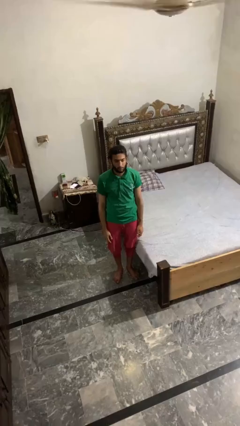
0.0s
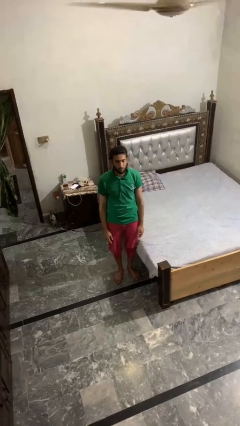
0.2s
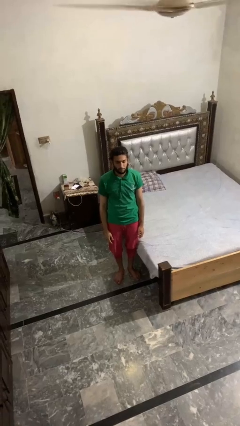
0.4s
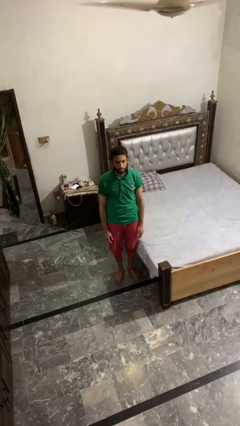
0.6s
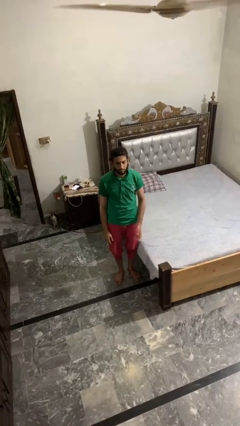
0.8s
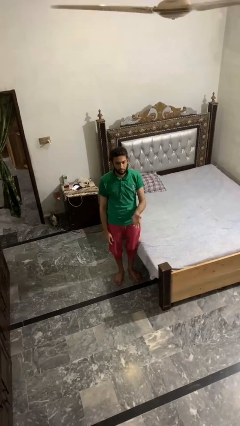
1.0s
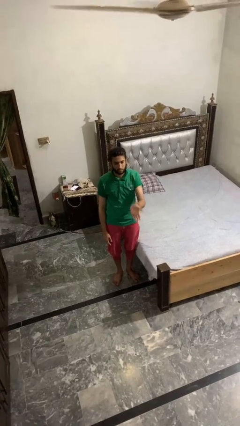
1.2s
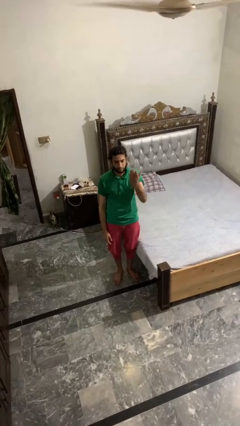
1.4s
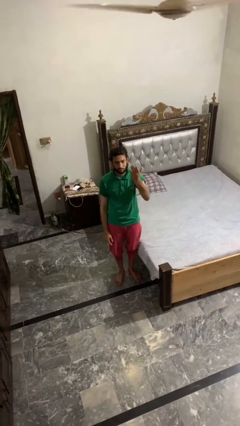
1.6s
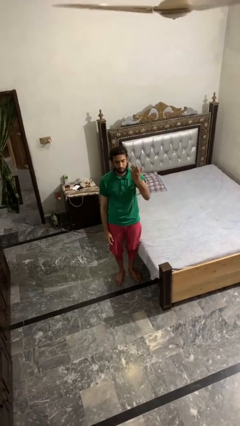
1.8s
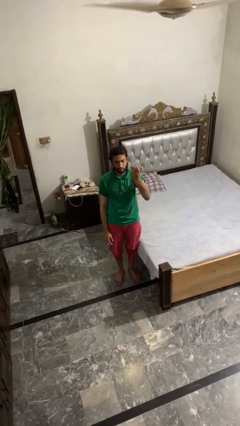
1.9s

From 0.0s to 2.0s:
person gestures swipe up

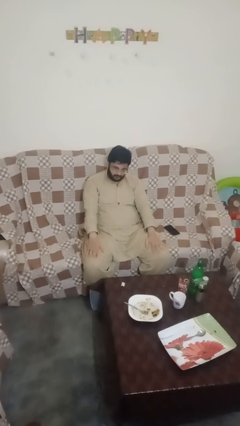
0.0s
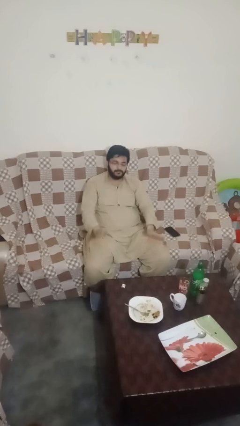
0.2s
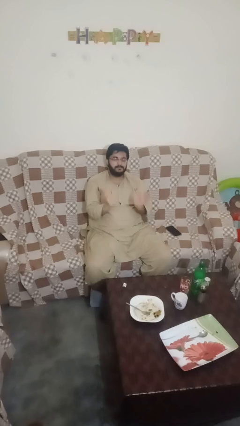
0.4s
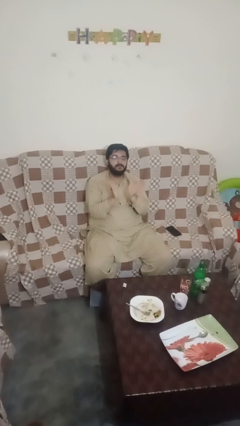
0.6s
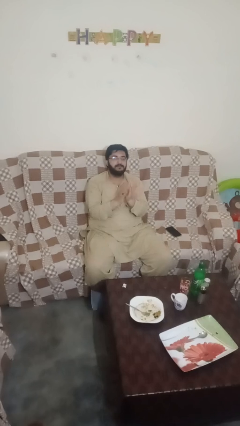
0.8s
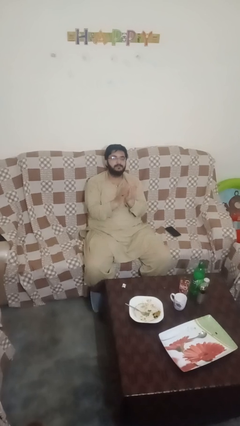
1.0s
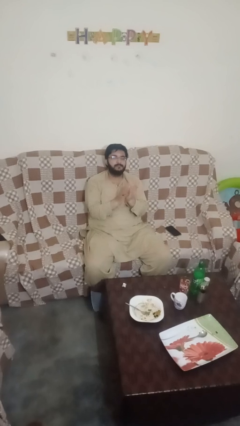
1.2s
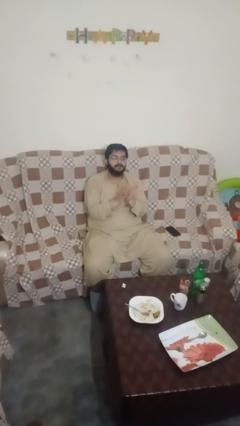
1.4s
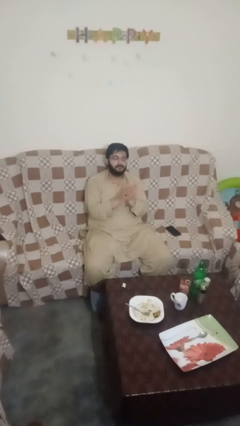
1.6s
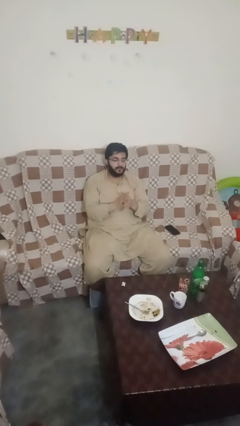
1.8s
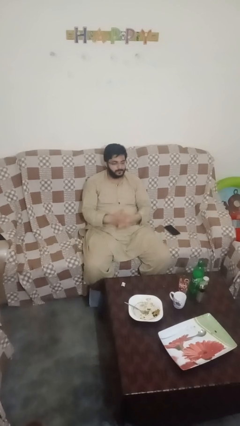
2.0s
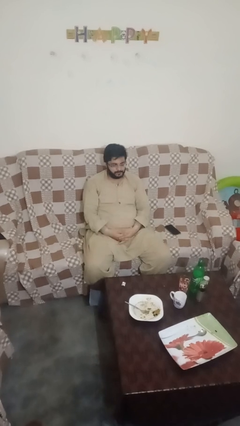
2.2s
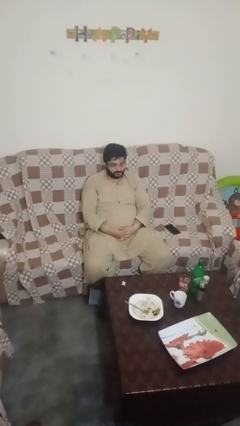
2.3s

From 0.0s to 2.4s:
person claps hands

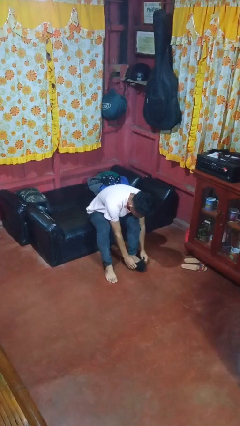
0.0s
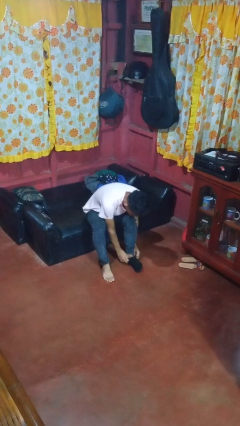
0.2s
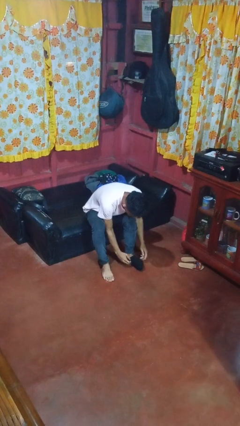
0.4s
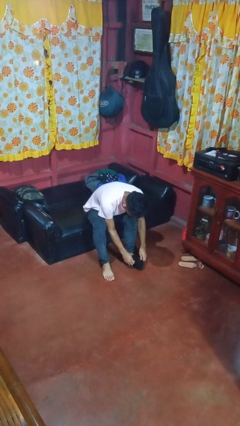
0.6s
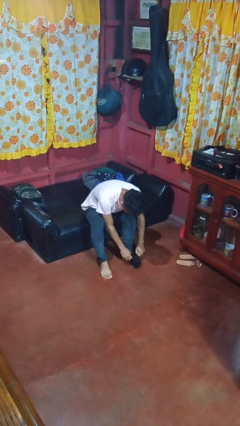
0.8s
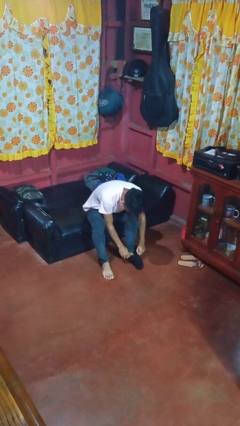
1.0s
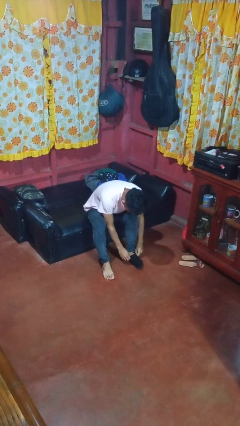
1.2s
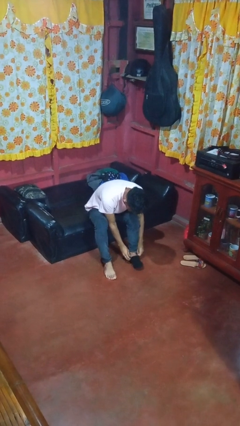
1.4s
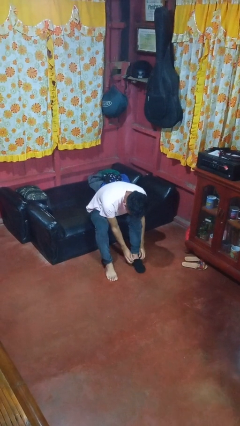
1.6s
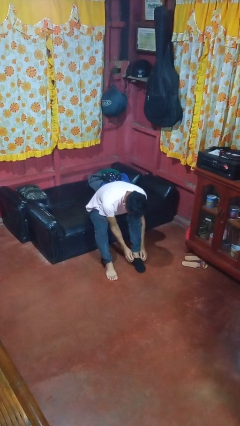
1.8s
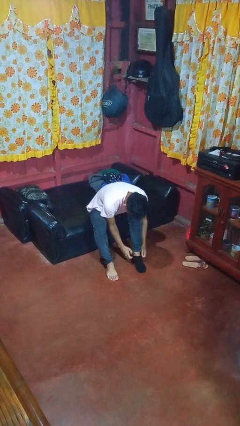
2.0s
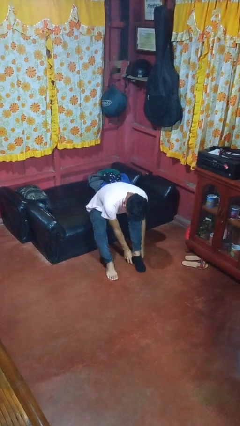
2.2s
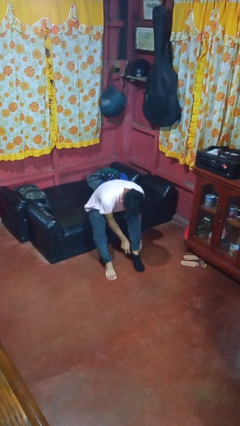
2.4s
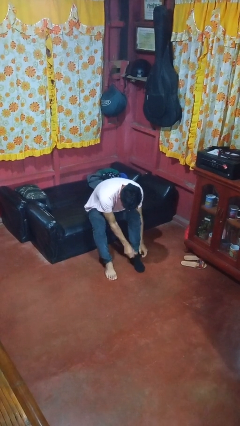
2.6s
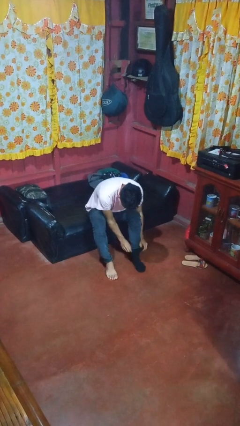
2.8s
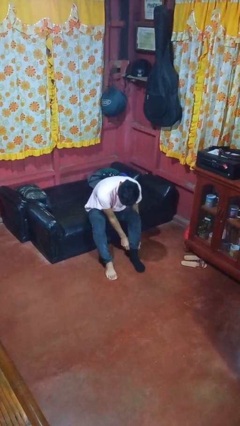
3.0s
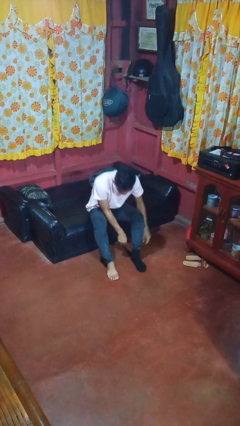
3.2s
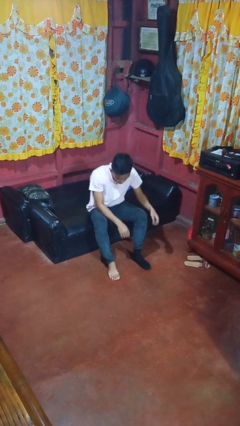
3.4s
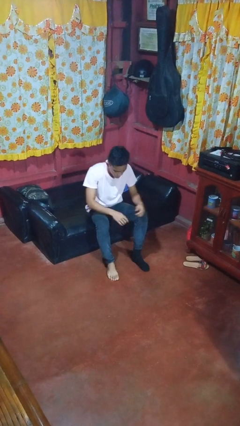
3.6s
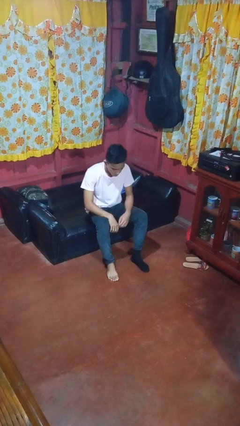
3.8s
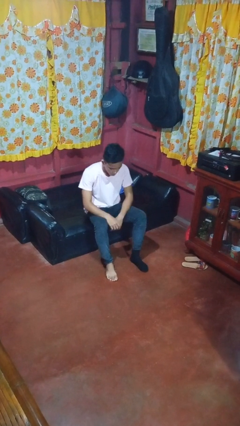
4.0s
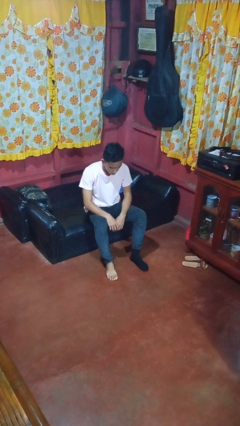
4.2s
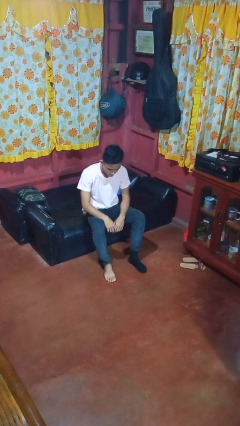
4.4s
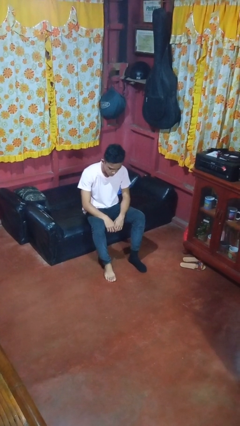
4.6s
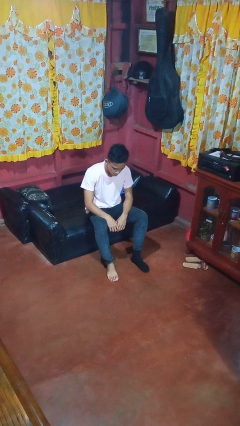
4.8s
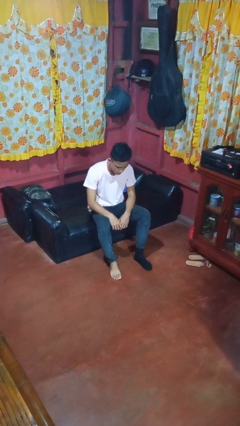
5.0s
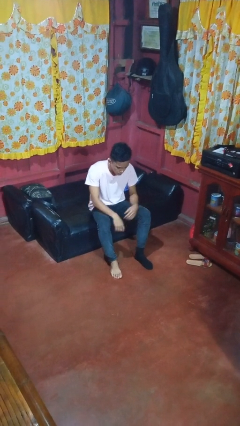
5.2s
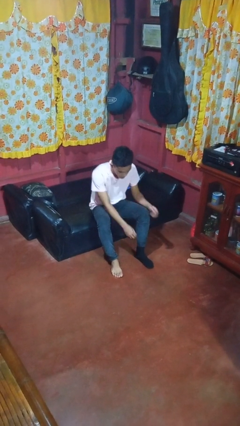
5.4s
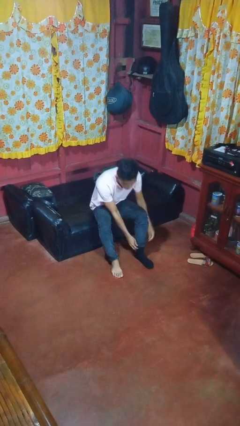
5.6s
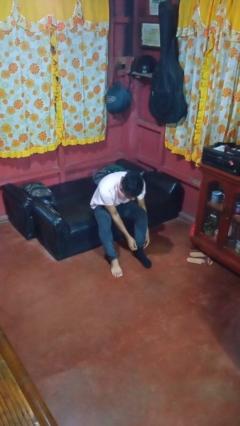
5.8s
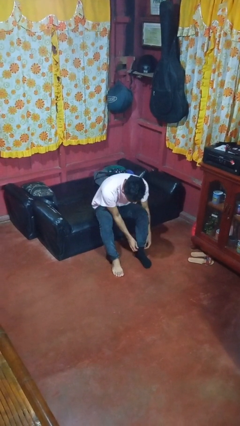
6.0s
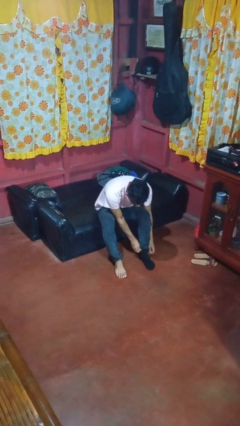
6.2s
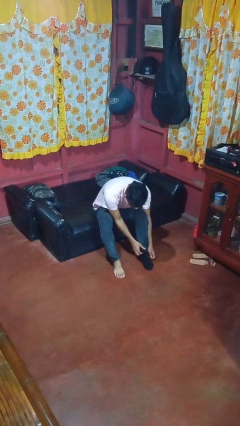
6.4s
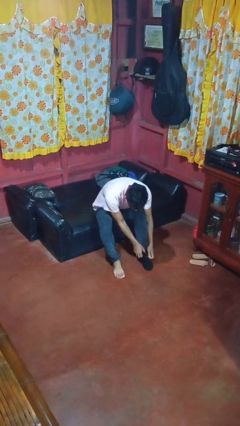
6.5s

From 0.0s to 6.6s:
person puts on socks

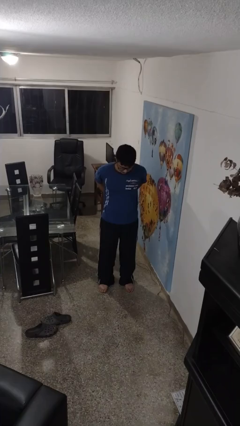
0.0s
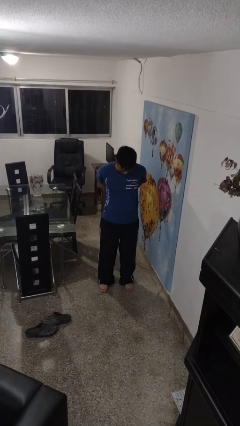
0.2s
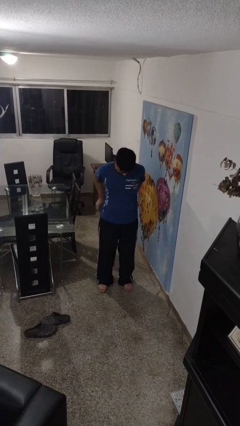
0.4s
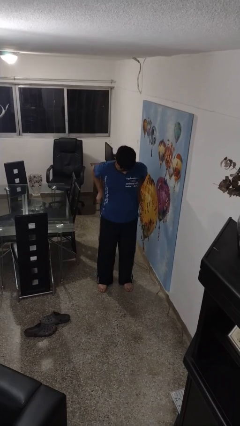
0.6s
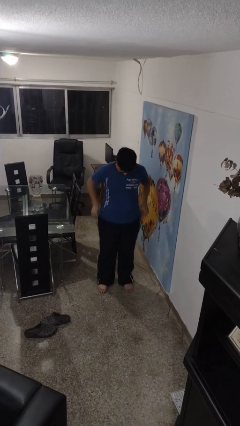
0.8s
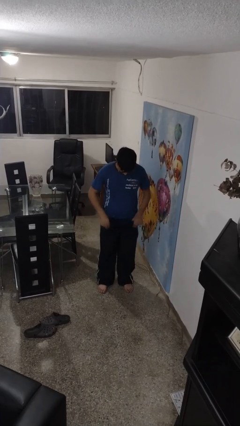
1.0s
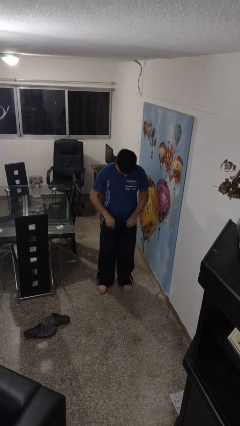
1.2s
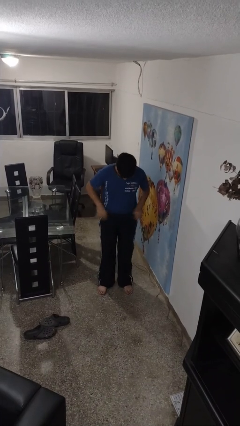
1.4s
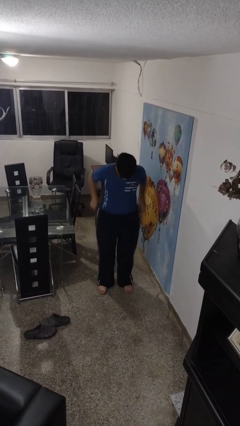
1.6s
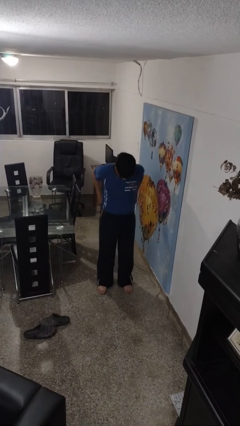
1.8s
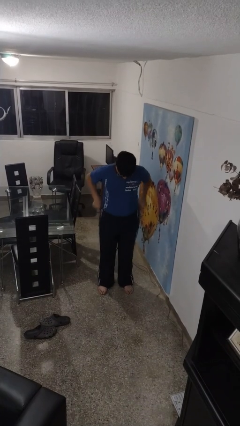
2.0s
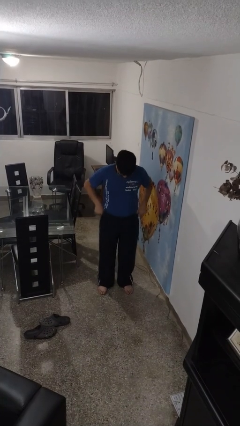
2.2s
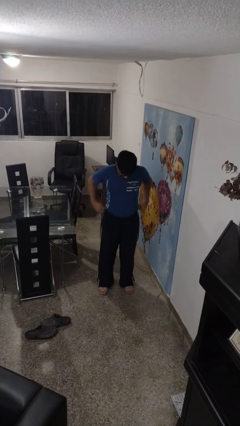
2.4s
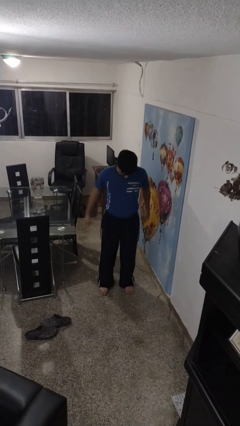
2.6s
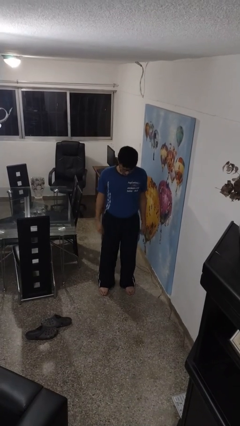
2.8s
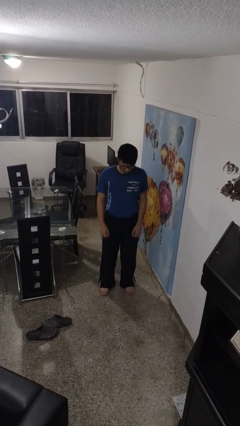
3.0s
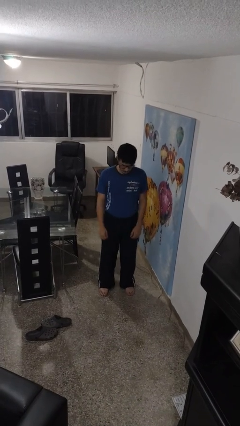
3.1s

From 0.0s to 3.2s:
person tucks in shirt

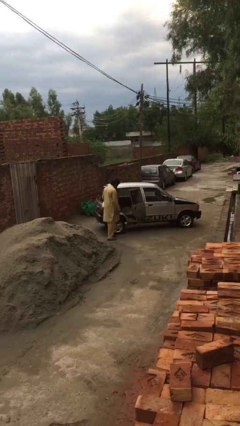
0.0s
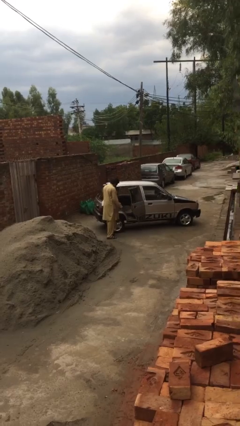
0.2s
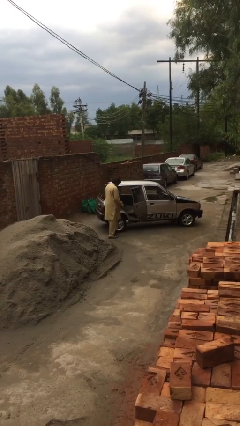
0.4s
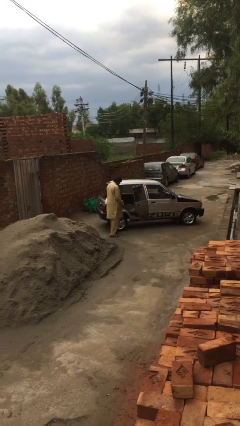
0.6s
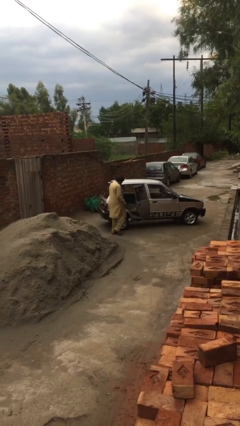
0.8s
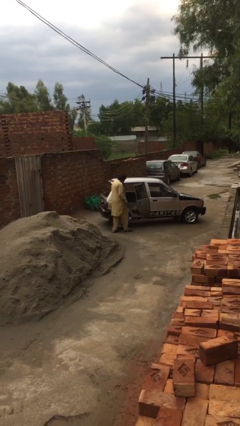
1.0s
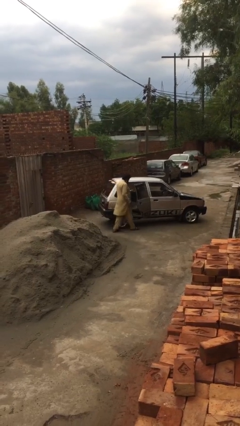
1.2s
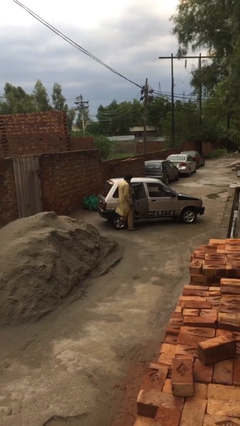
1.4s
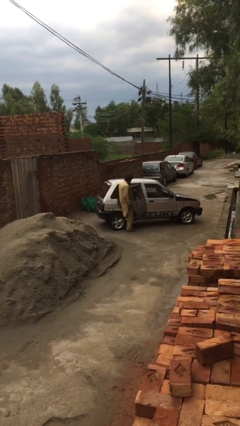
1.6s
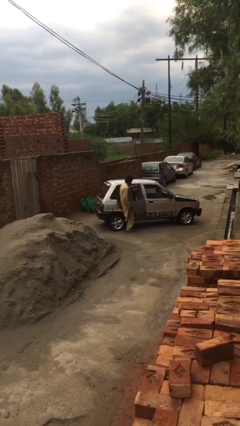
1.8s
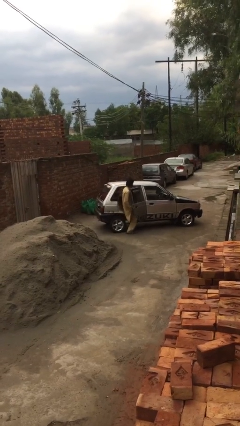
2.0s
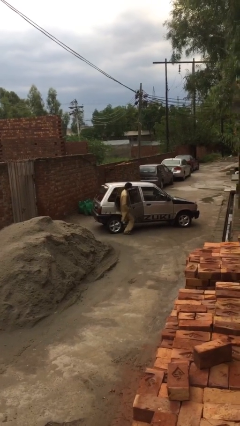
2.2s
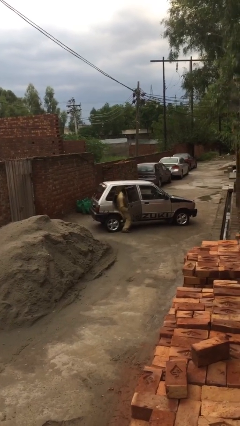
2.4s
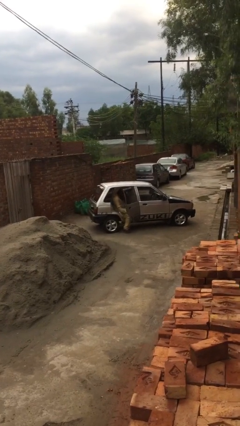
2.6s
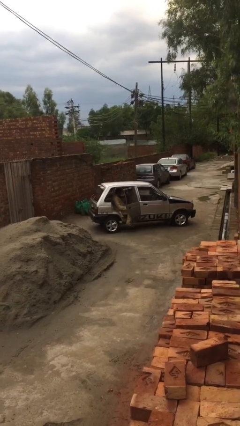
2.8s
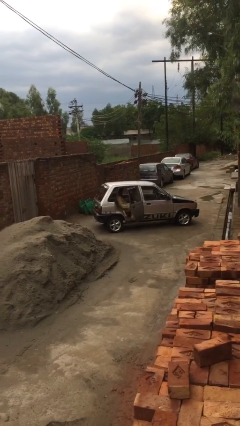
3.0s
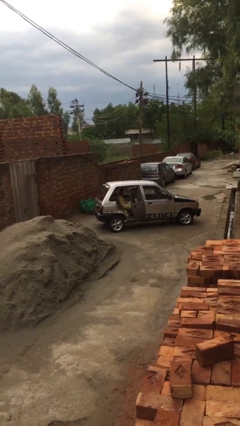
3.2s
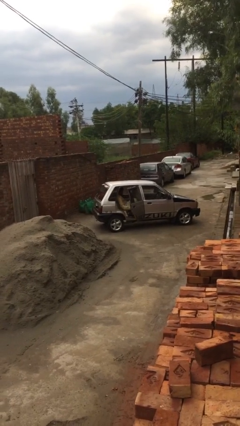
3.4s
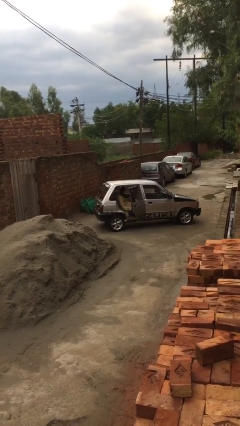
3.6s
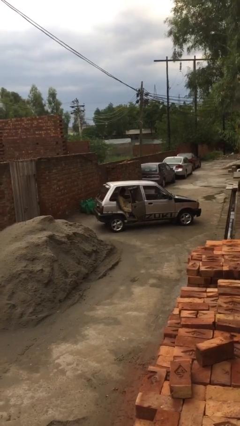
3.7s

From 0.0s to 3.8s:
person enters car
